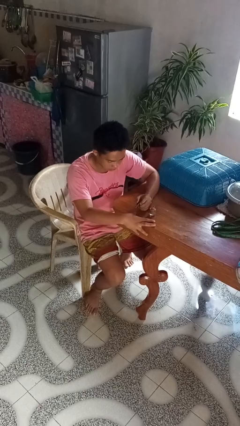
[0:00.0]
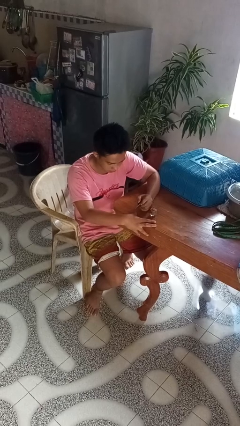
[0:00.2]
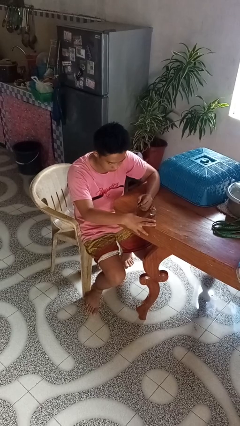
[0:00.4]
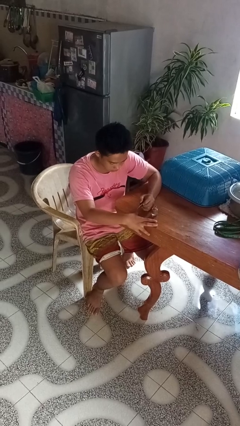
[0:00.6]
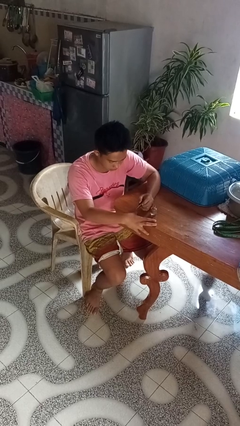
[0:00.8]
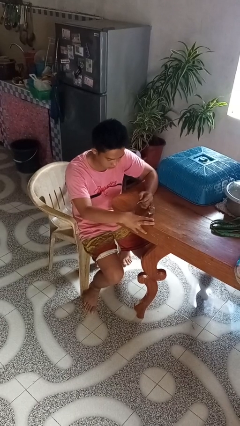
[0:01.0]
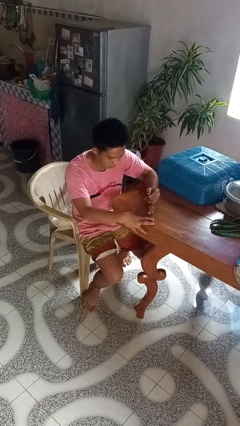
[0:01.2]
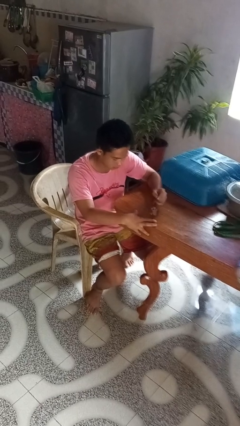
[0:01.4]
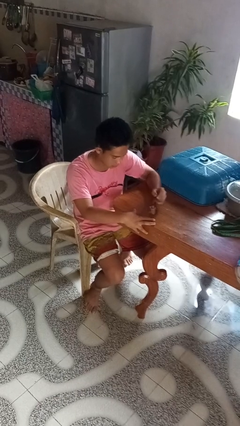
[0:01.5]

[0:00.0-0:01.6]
person paints fingernails

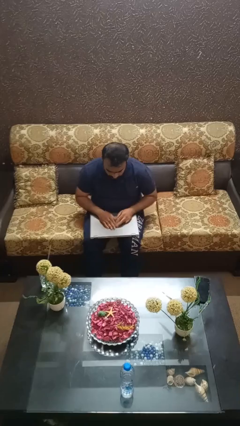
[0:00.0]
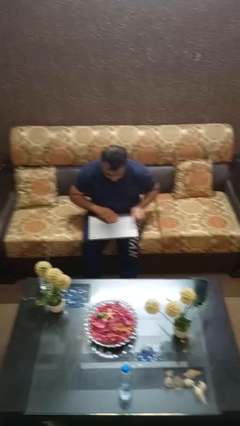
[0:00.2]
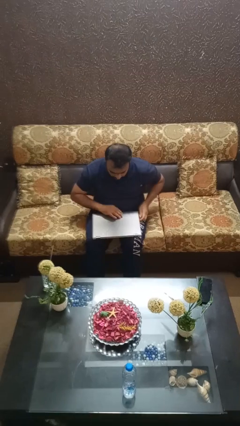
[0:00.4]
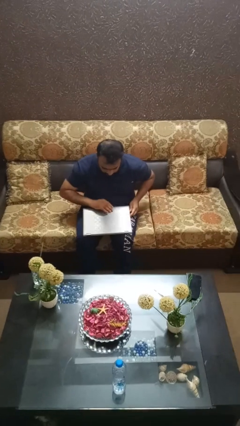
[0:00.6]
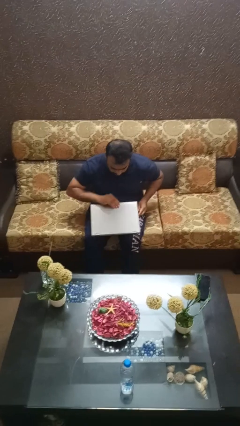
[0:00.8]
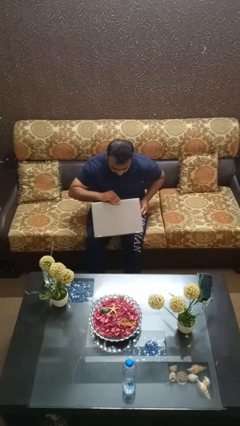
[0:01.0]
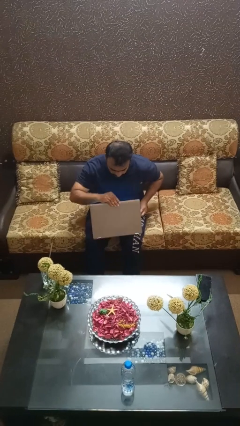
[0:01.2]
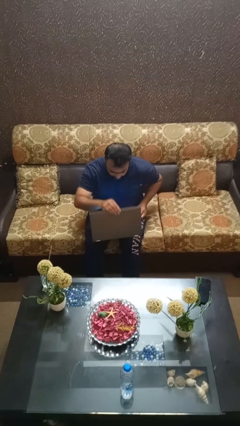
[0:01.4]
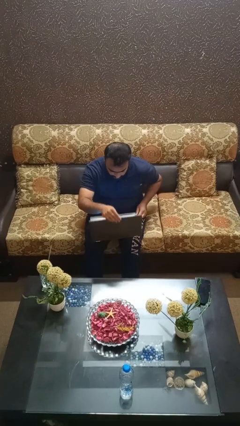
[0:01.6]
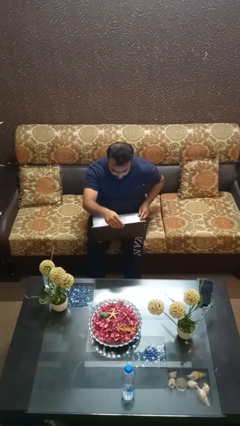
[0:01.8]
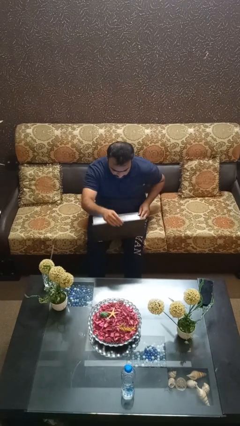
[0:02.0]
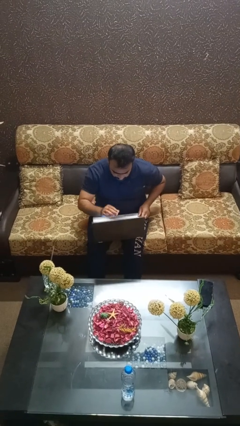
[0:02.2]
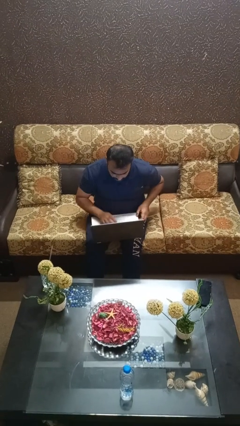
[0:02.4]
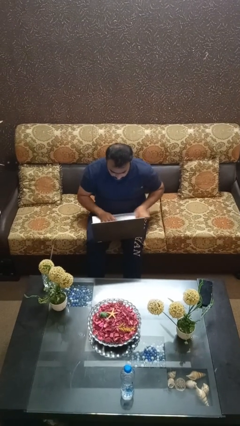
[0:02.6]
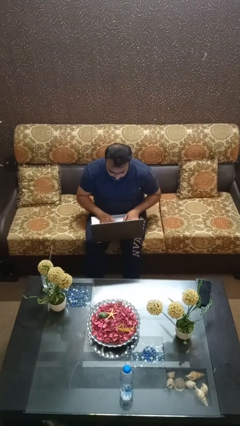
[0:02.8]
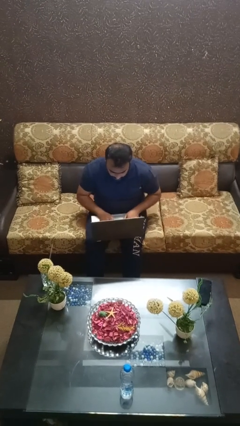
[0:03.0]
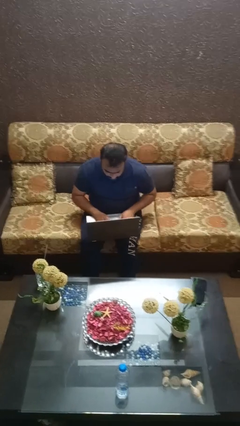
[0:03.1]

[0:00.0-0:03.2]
person opens laptop

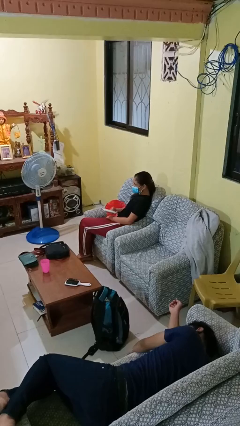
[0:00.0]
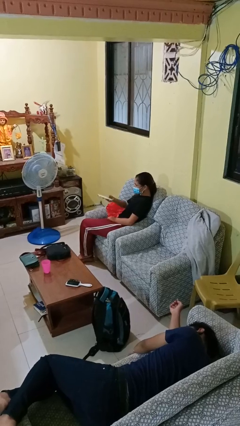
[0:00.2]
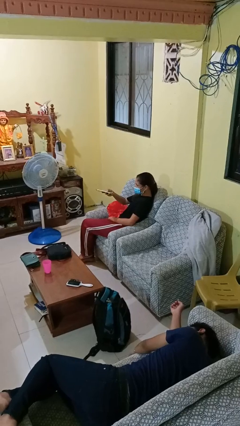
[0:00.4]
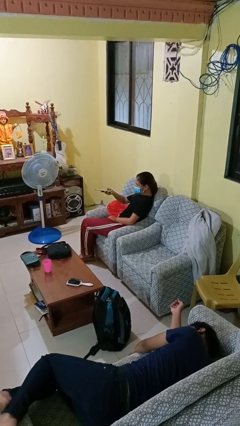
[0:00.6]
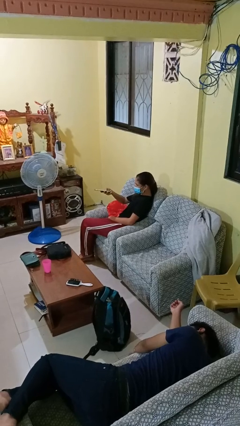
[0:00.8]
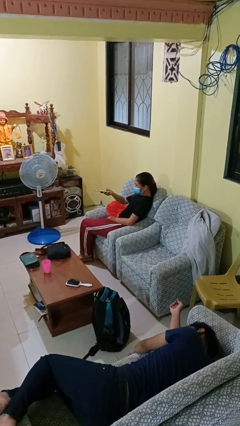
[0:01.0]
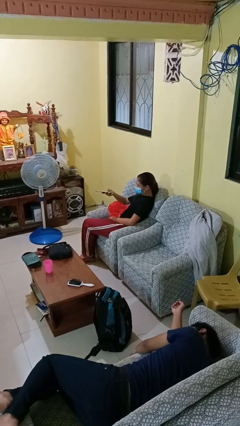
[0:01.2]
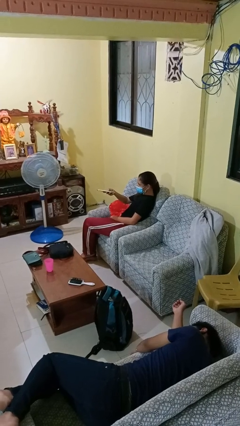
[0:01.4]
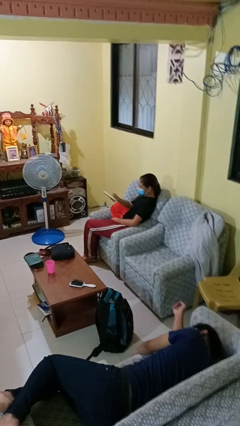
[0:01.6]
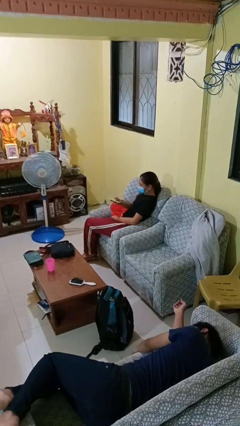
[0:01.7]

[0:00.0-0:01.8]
person uses television remote

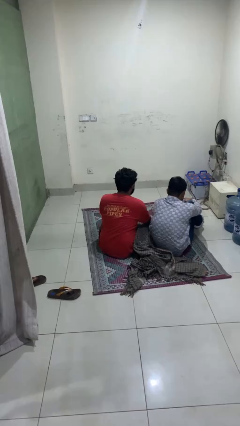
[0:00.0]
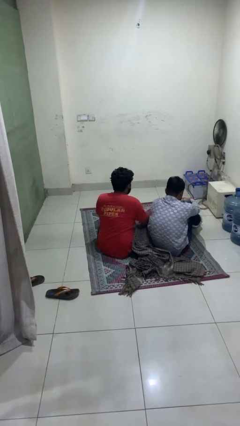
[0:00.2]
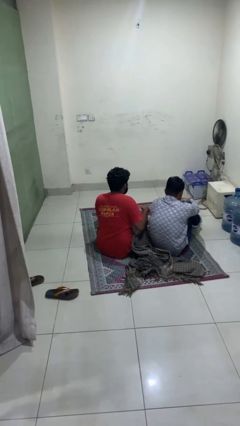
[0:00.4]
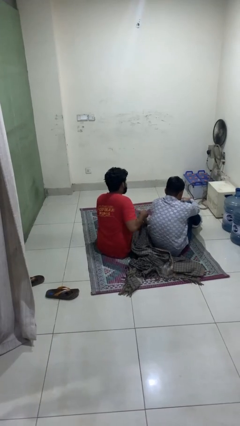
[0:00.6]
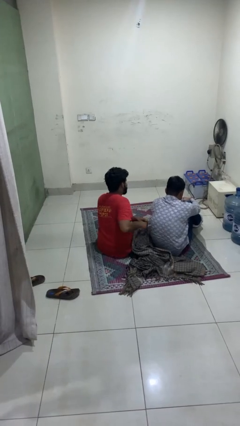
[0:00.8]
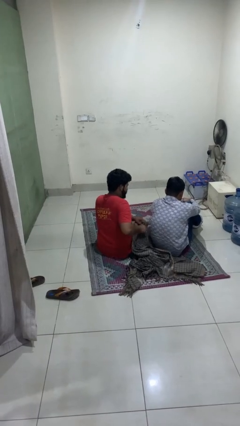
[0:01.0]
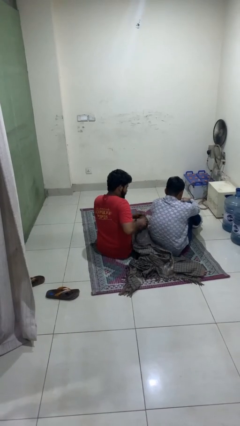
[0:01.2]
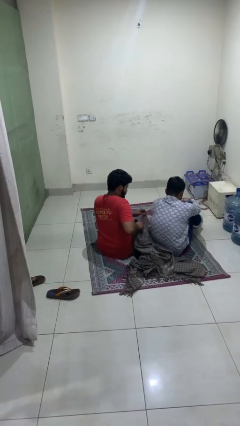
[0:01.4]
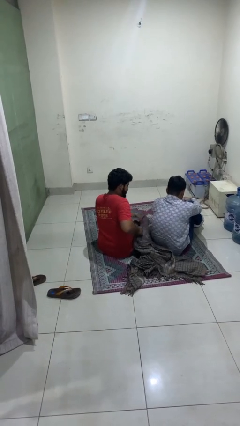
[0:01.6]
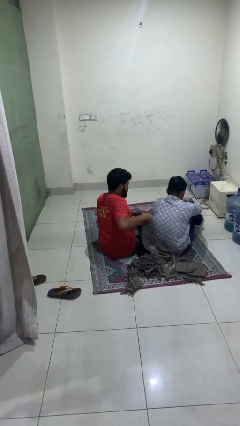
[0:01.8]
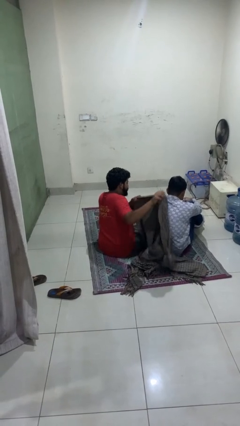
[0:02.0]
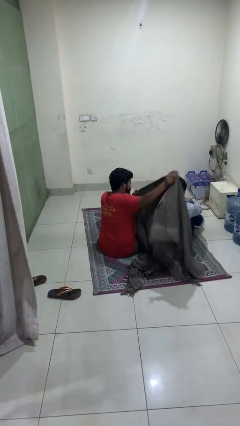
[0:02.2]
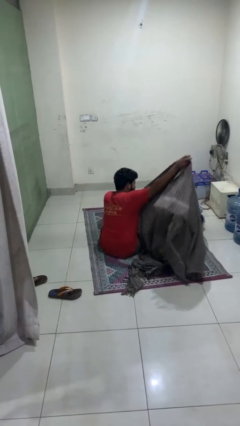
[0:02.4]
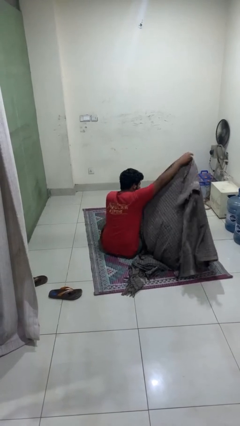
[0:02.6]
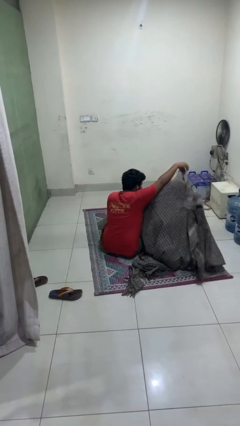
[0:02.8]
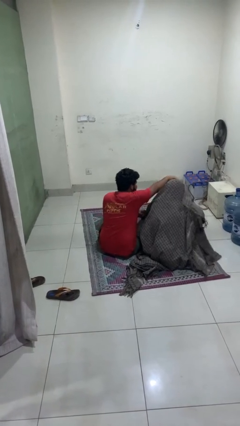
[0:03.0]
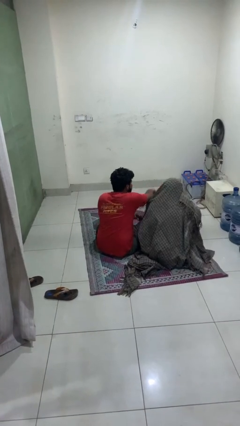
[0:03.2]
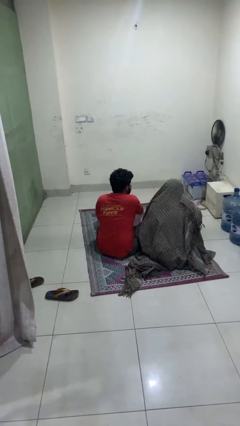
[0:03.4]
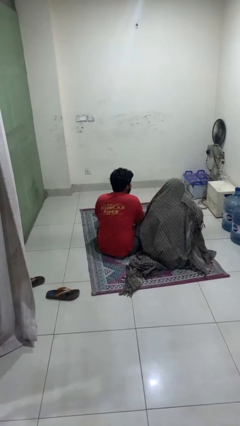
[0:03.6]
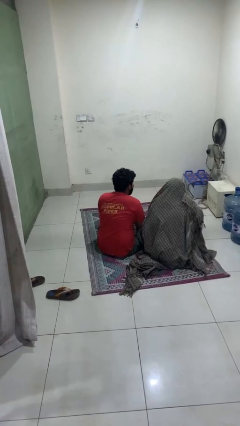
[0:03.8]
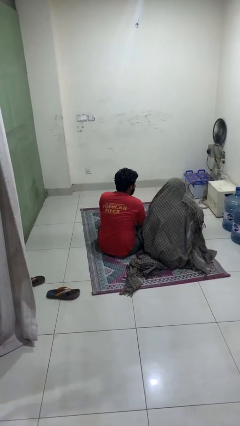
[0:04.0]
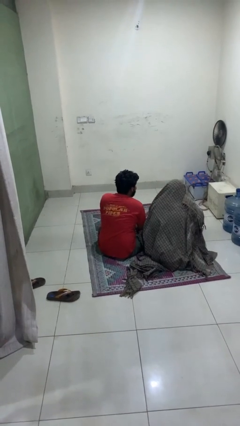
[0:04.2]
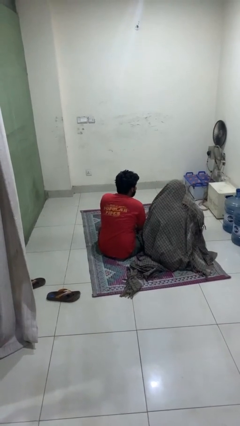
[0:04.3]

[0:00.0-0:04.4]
person covers friend with blanket

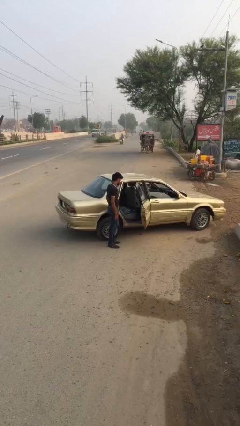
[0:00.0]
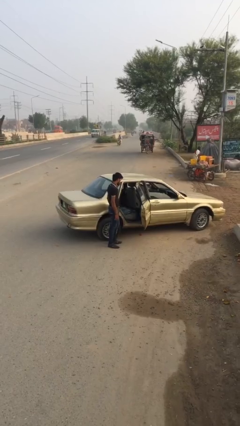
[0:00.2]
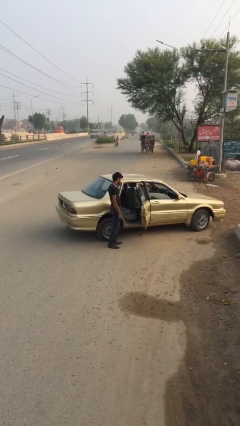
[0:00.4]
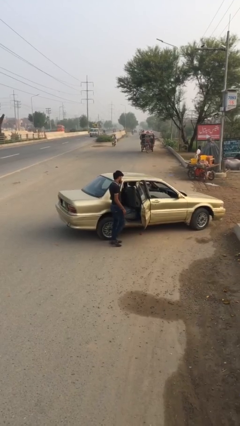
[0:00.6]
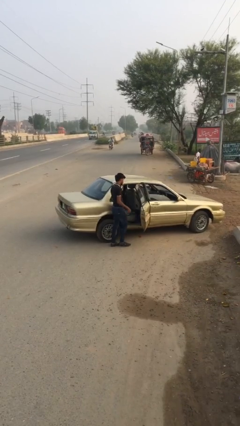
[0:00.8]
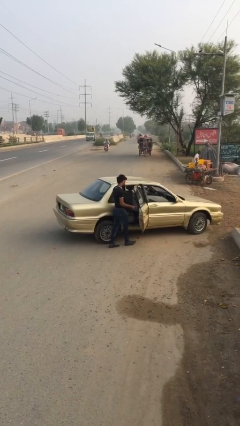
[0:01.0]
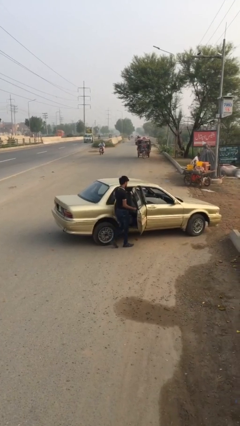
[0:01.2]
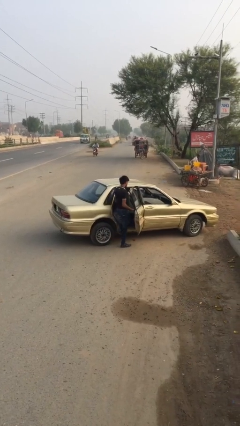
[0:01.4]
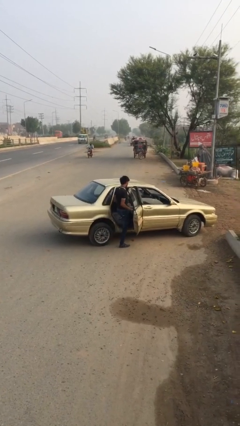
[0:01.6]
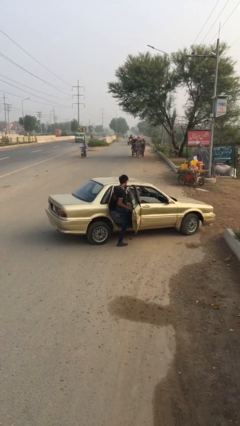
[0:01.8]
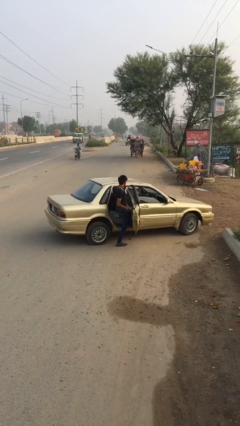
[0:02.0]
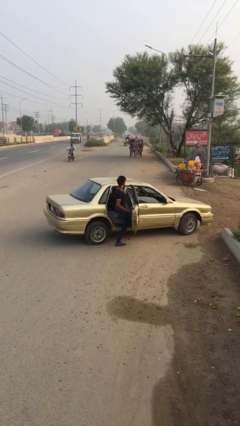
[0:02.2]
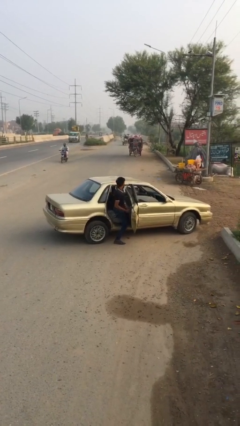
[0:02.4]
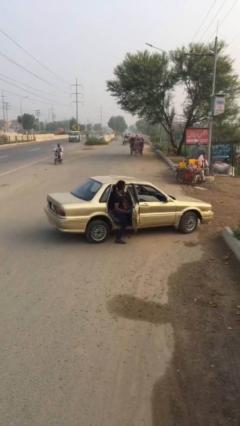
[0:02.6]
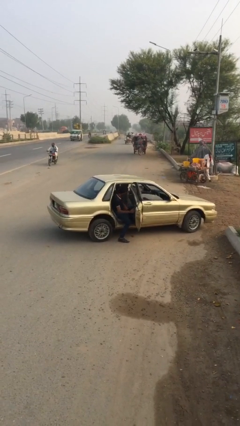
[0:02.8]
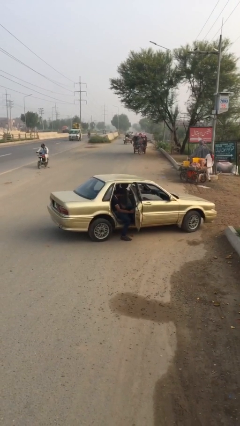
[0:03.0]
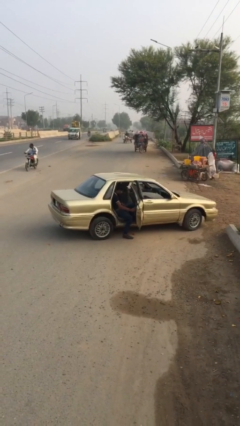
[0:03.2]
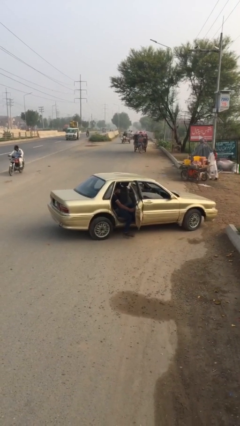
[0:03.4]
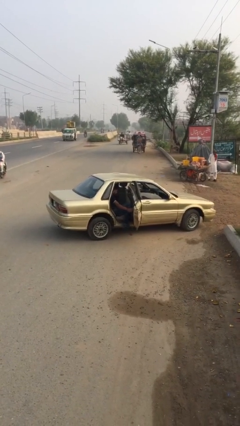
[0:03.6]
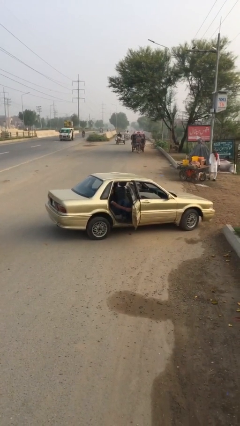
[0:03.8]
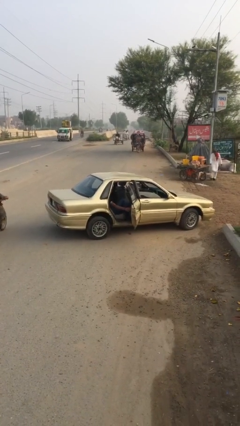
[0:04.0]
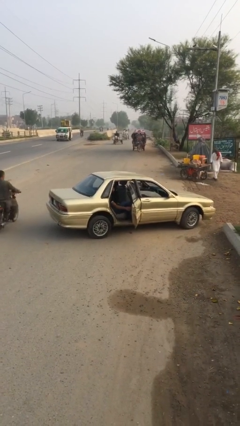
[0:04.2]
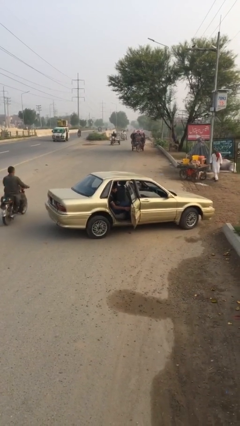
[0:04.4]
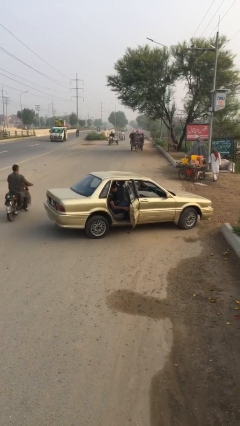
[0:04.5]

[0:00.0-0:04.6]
person enters car

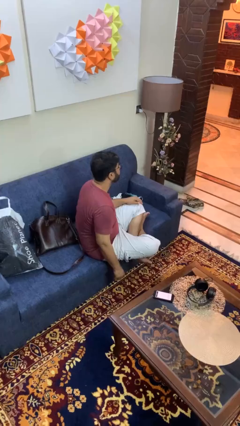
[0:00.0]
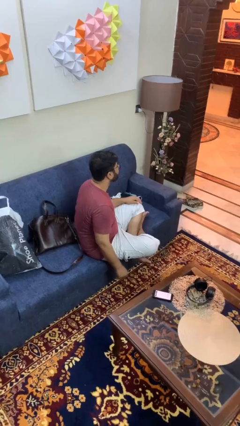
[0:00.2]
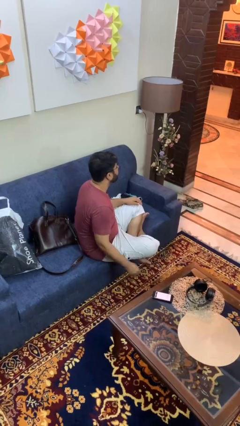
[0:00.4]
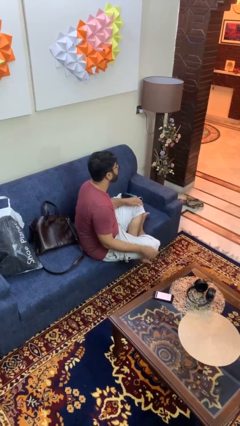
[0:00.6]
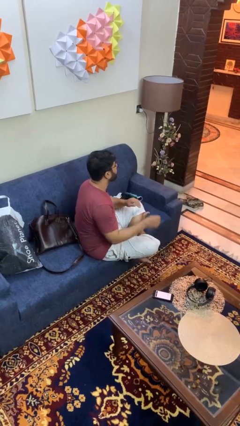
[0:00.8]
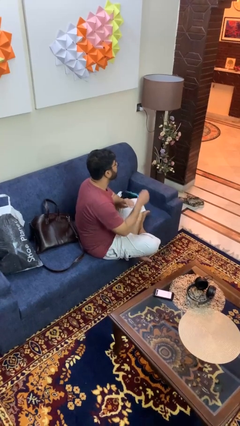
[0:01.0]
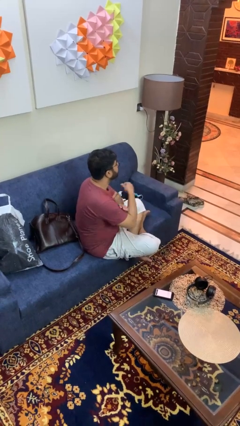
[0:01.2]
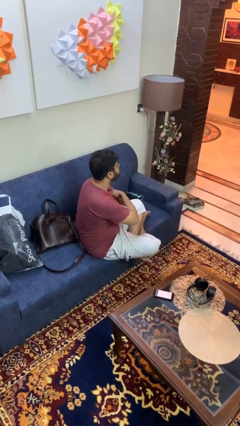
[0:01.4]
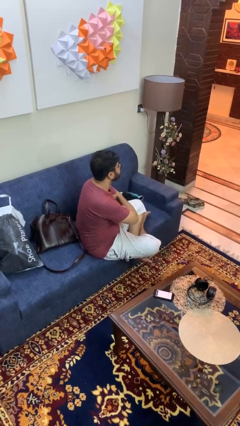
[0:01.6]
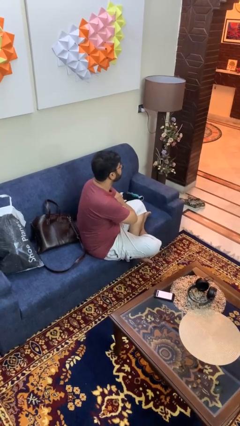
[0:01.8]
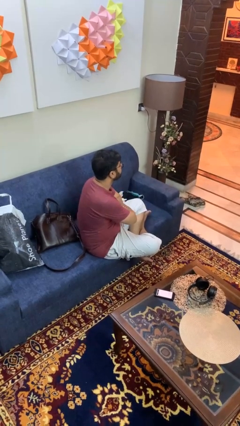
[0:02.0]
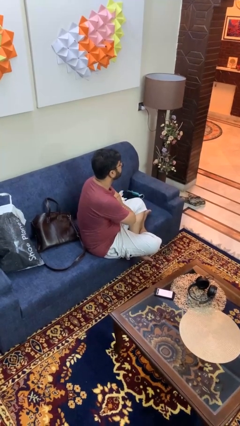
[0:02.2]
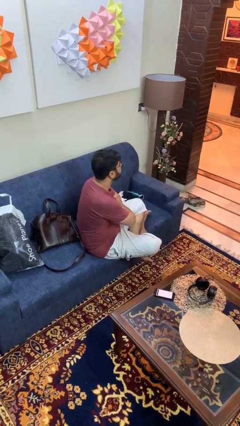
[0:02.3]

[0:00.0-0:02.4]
person crosses arms
